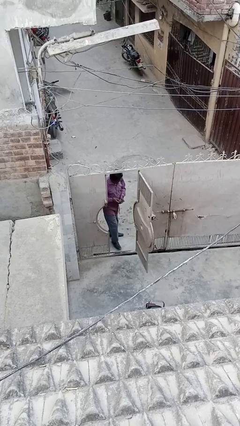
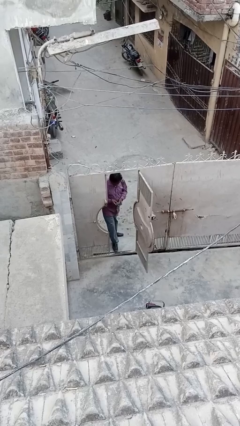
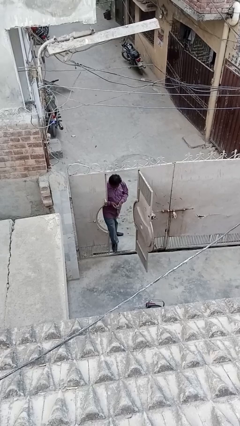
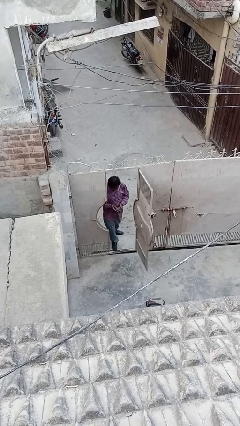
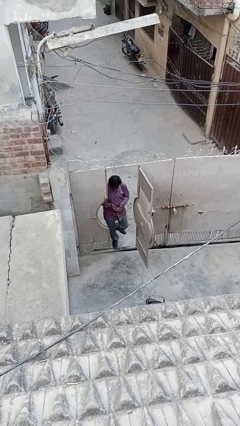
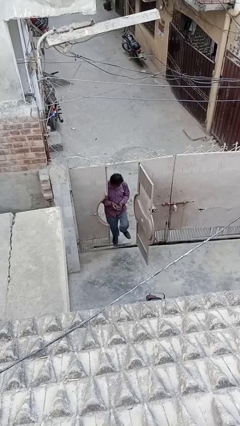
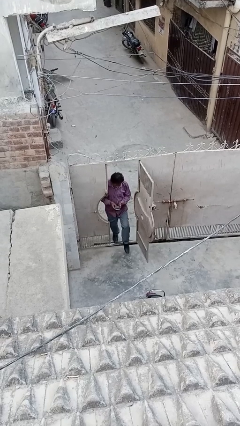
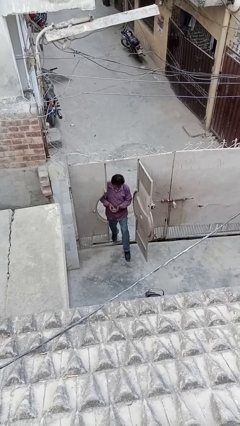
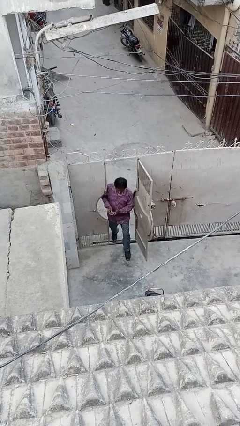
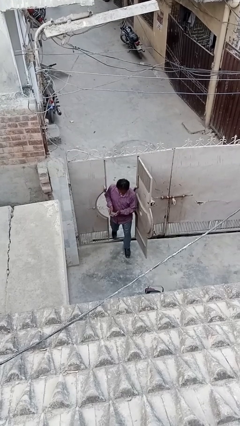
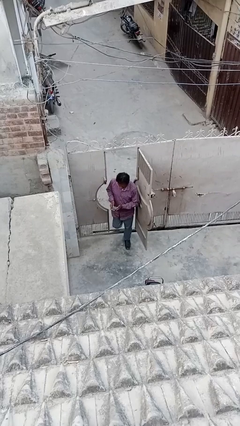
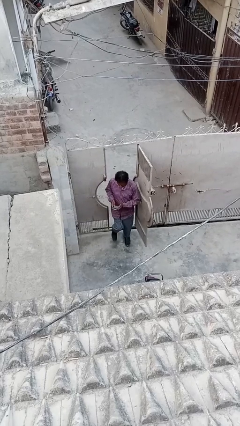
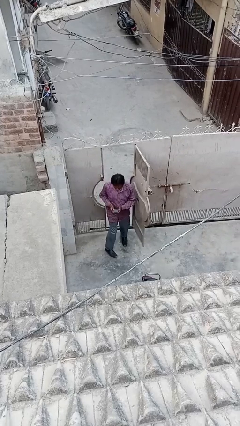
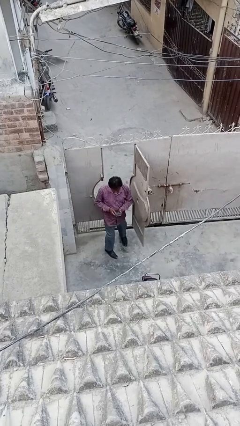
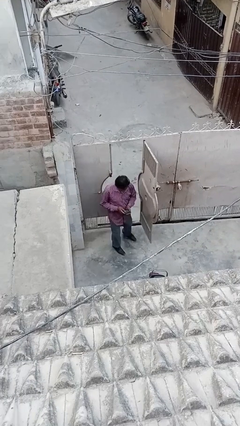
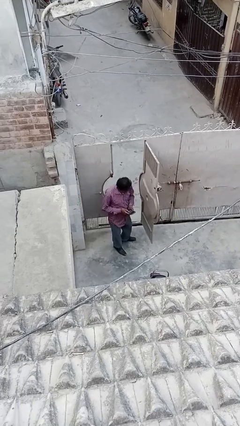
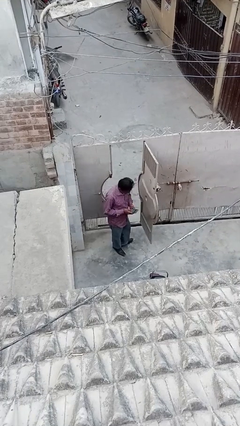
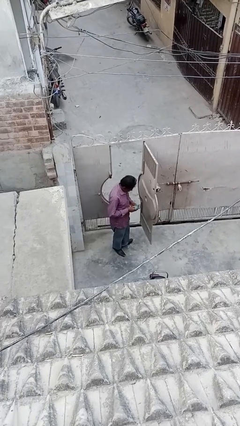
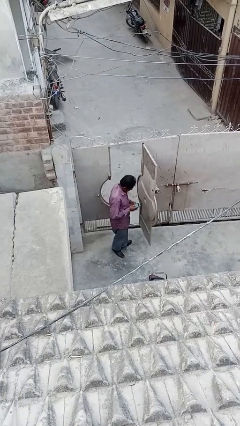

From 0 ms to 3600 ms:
person enters scene through structure

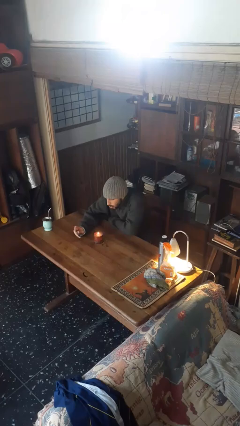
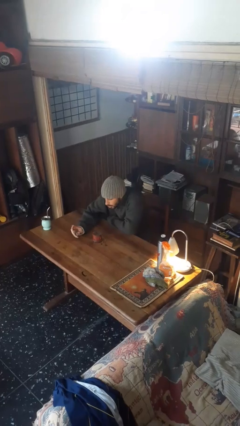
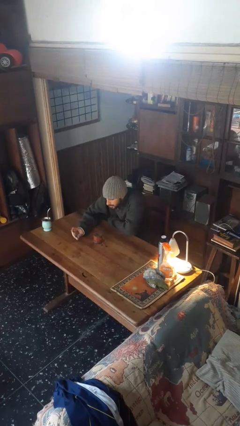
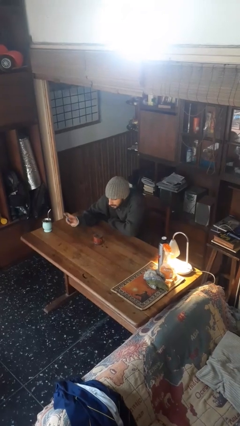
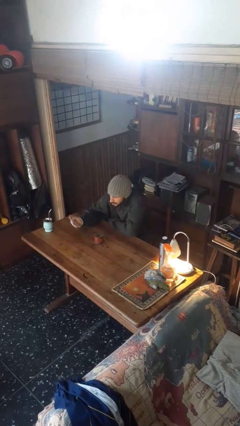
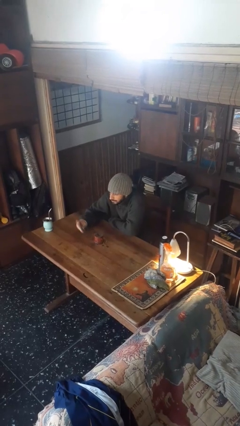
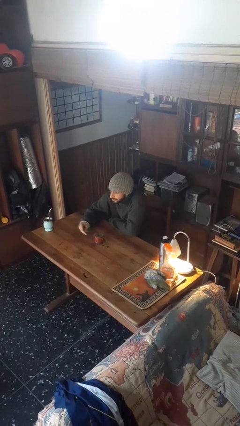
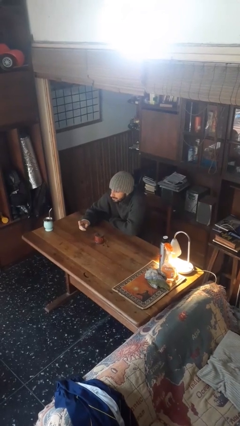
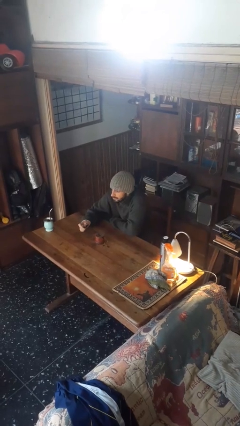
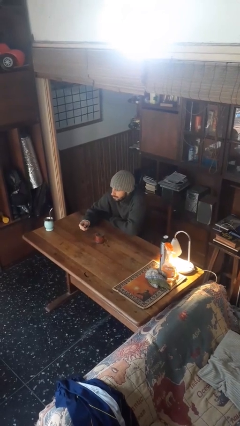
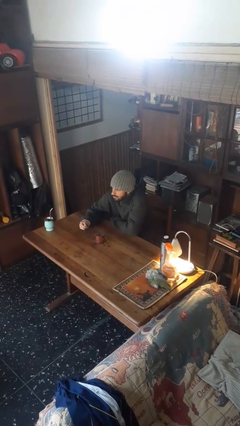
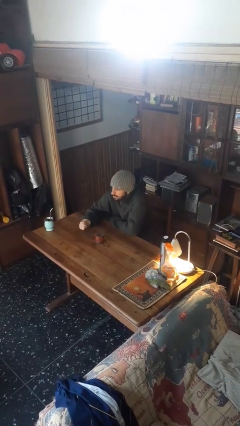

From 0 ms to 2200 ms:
person extinguishes candle

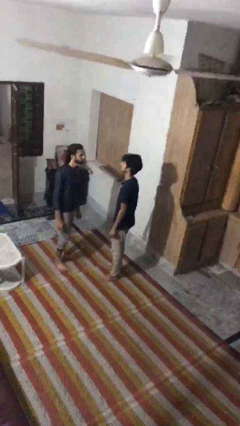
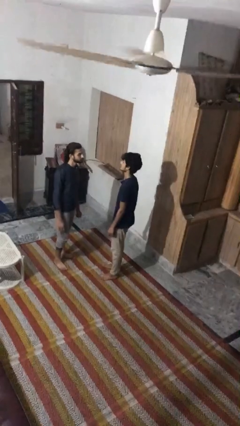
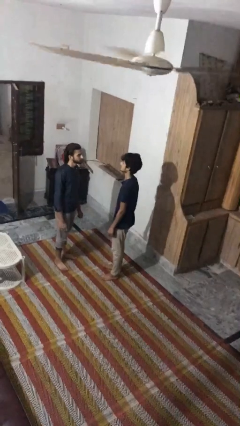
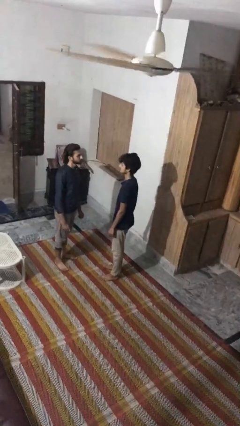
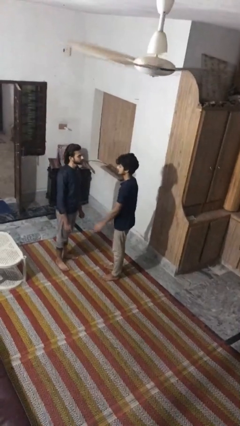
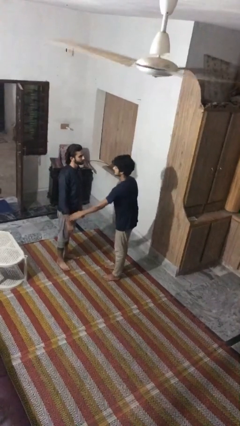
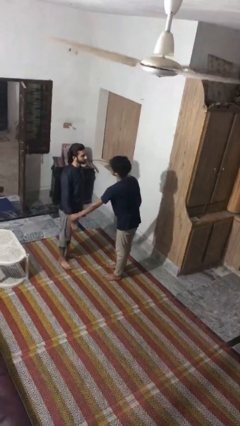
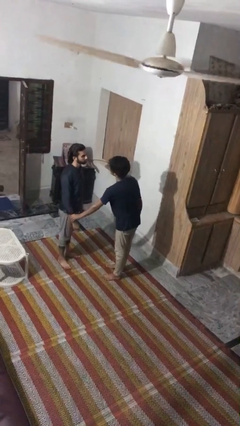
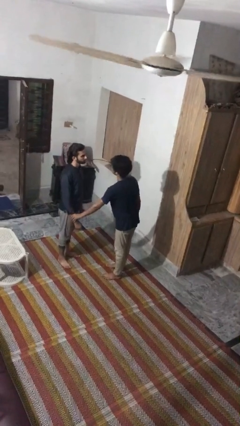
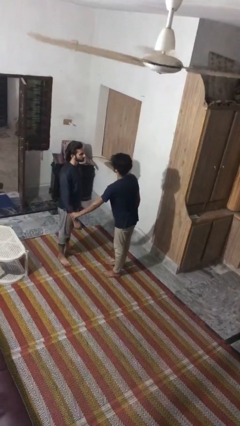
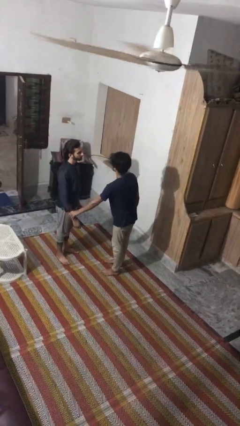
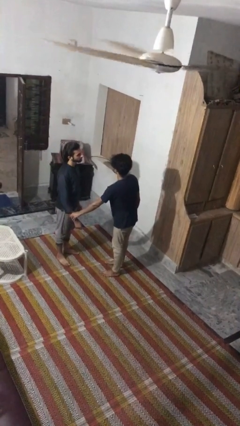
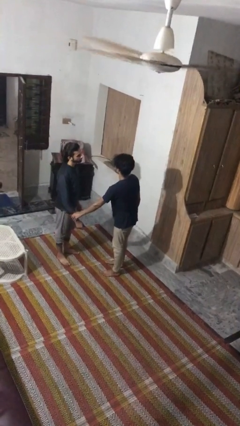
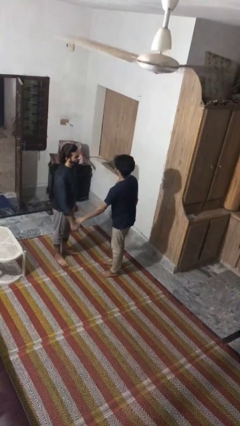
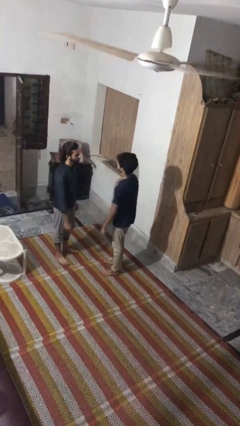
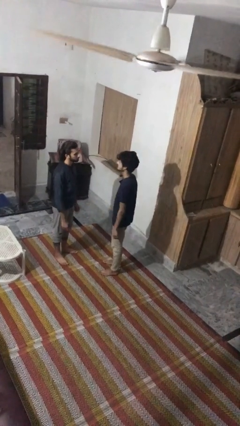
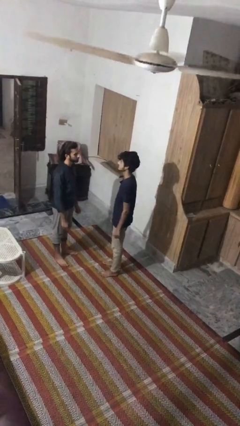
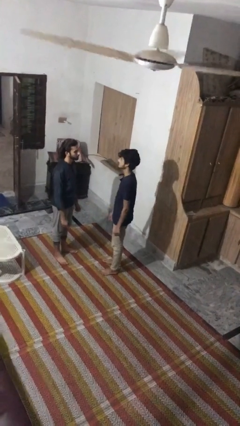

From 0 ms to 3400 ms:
person grabs person by forearm

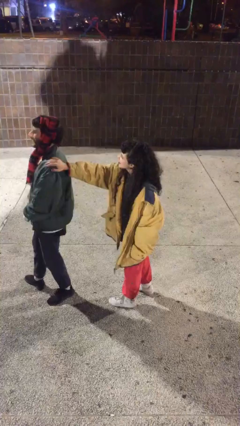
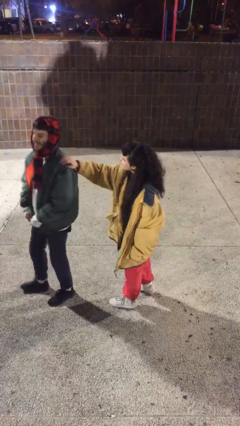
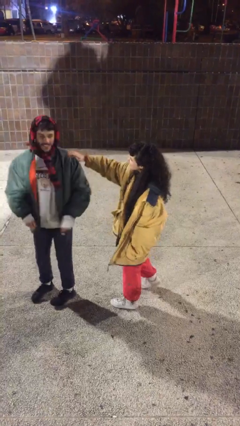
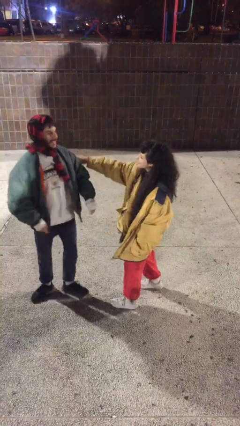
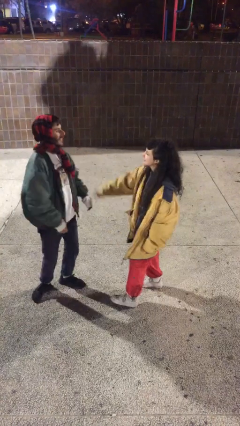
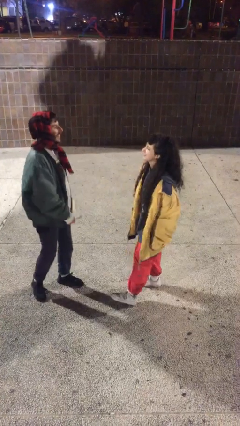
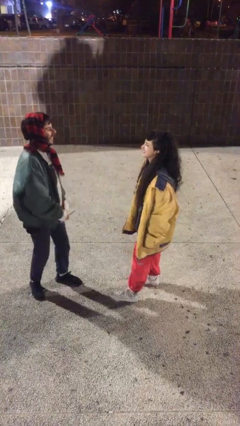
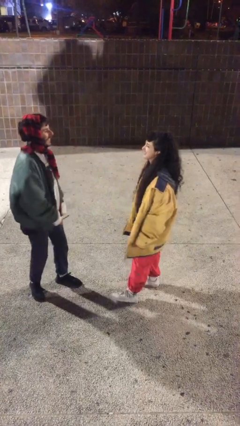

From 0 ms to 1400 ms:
person spins person around

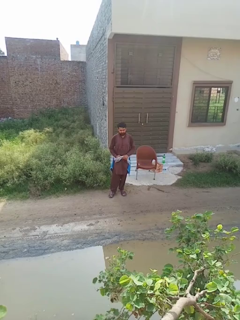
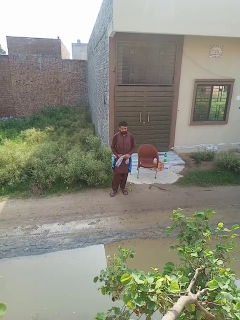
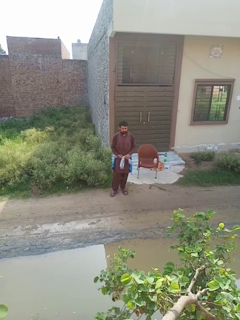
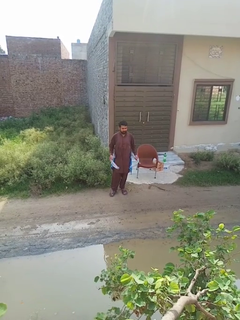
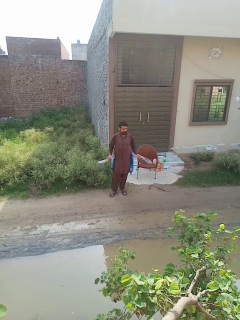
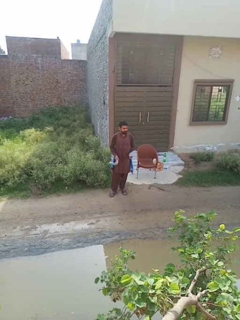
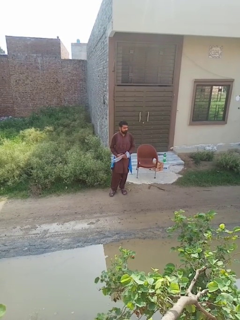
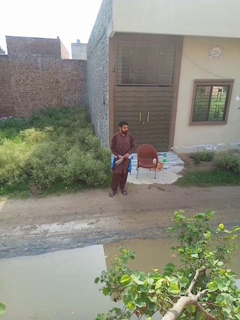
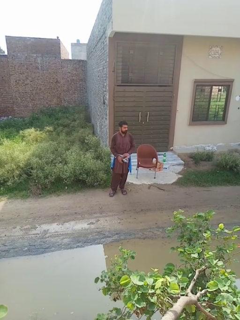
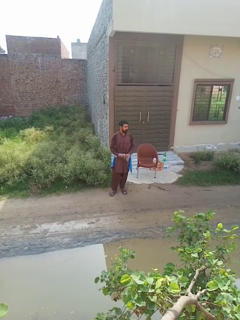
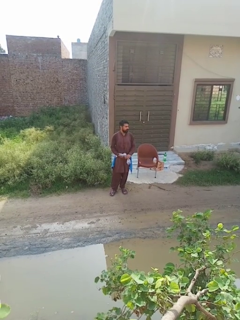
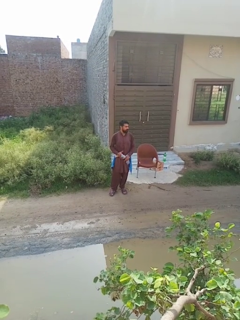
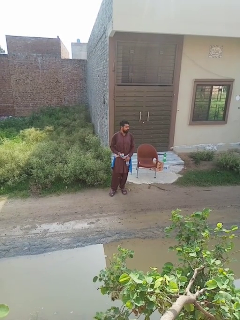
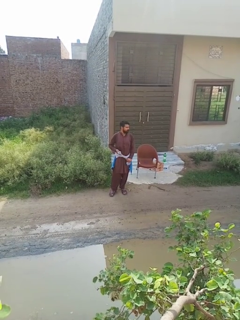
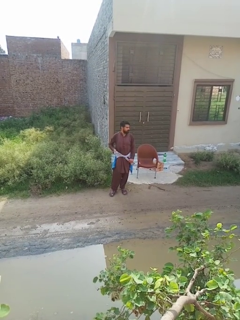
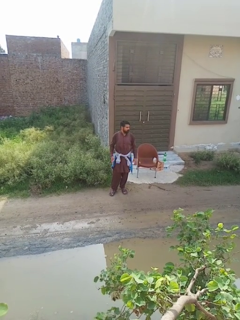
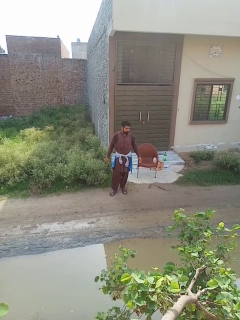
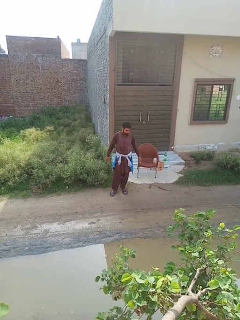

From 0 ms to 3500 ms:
person ties jacket around waist

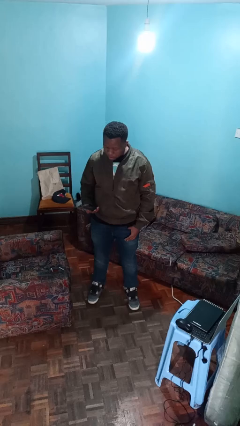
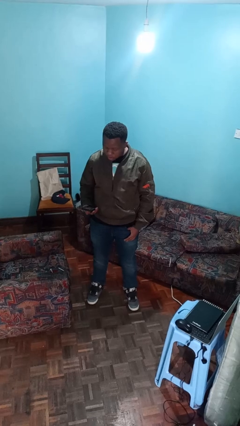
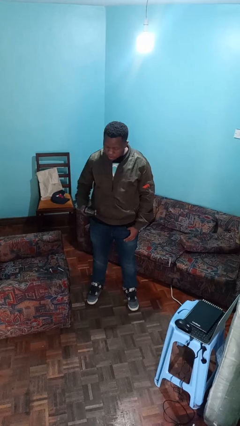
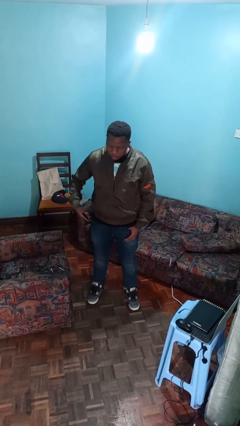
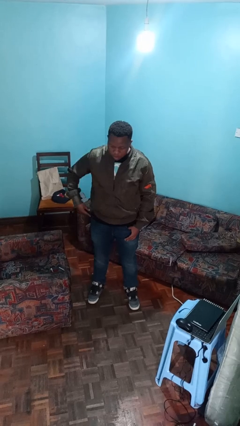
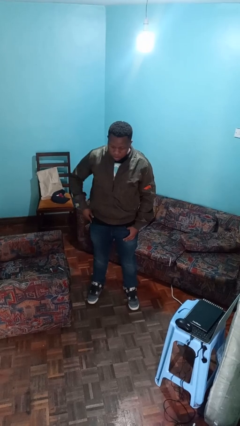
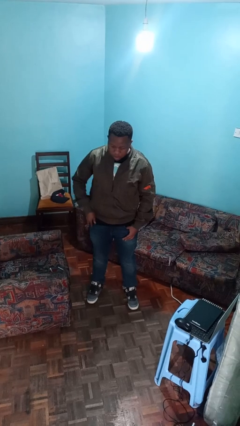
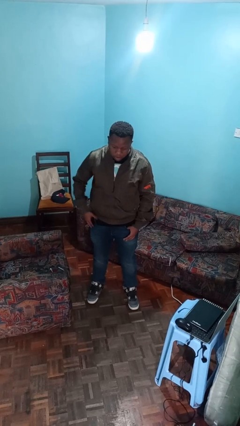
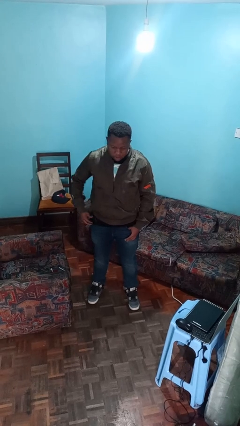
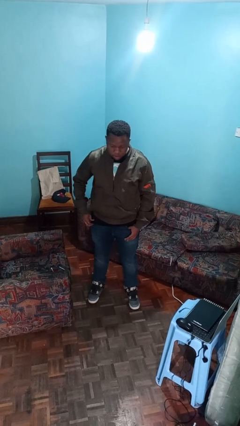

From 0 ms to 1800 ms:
person puts phone into pocket

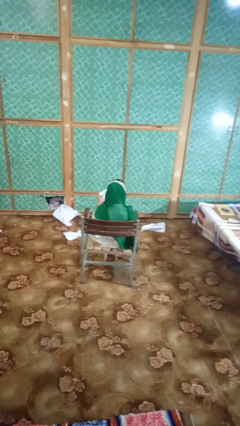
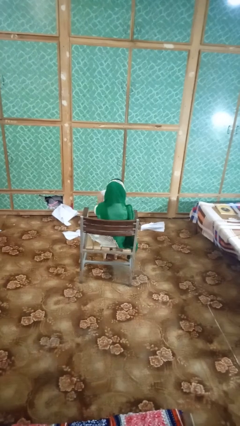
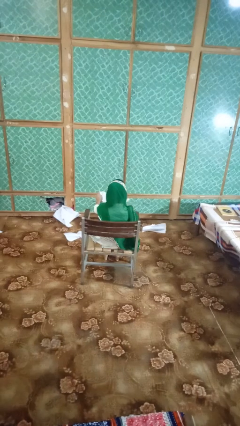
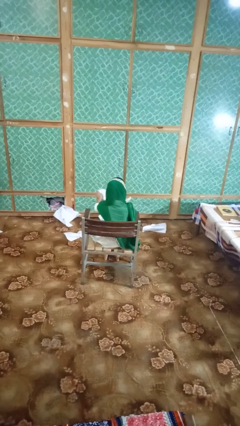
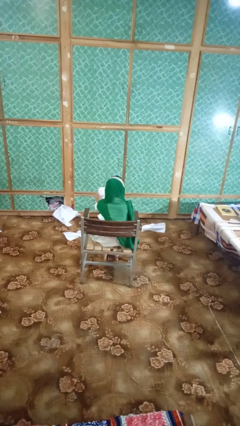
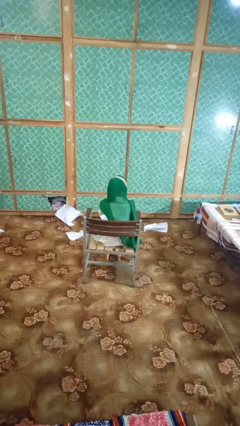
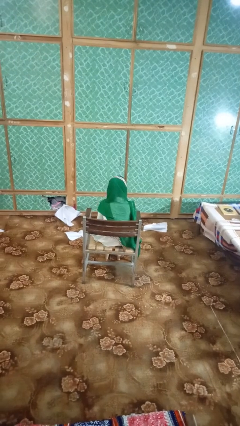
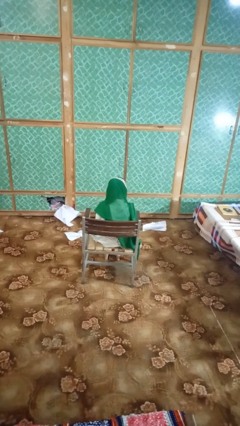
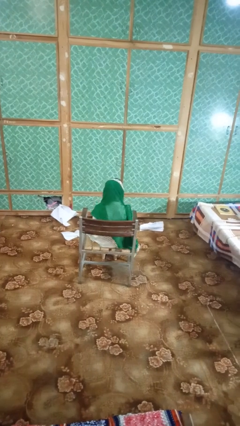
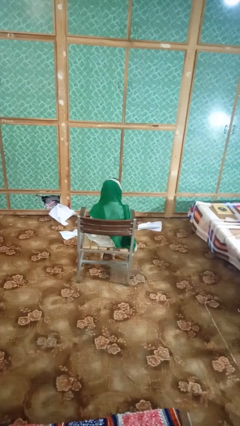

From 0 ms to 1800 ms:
person tears paper
